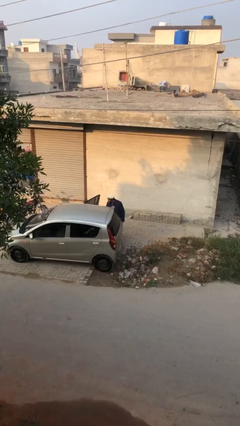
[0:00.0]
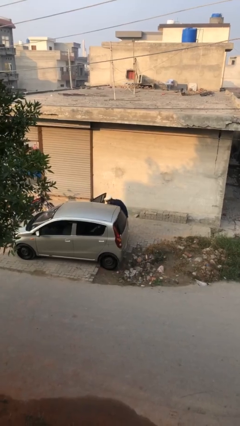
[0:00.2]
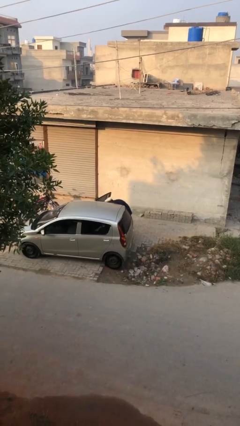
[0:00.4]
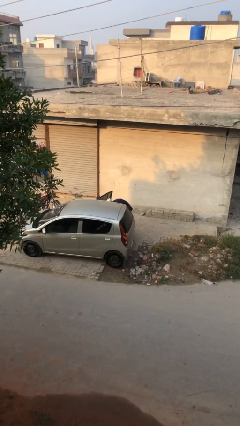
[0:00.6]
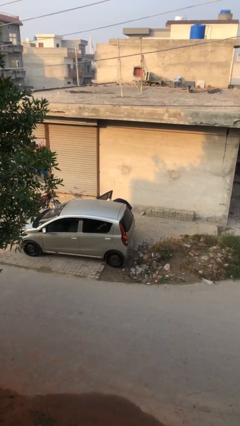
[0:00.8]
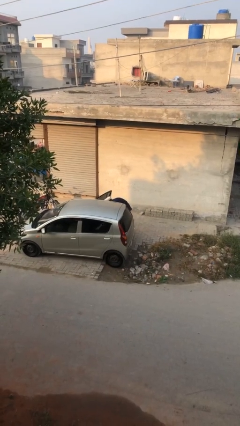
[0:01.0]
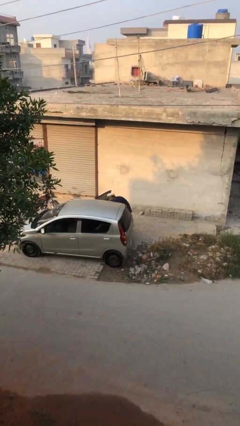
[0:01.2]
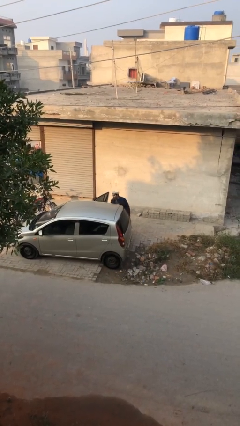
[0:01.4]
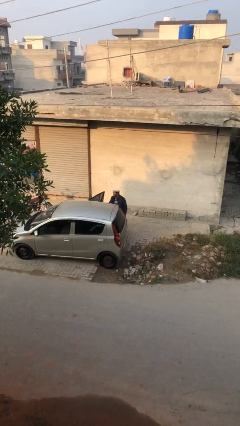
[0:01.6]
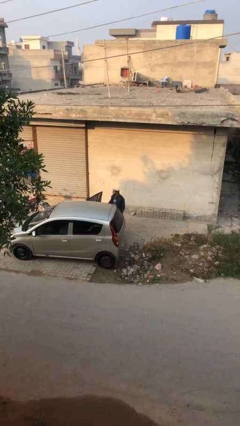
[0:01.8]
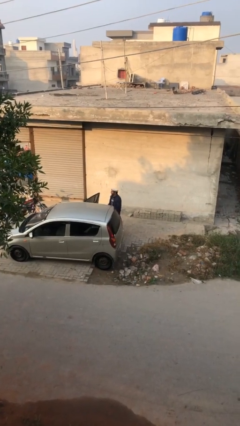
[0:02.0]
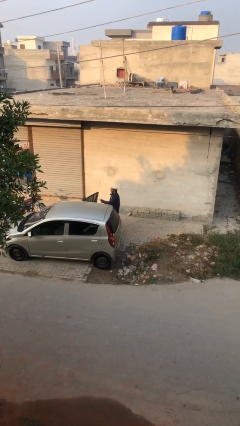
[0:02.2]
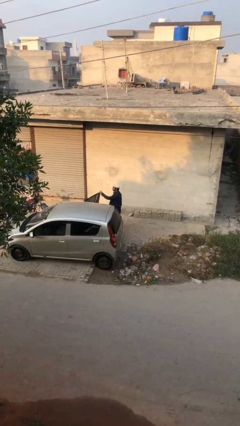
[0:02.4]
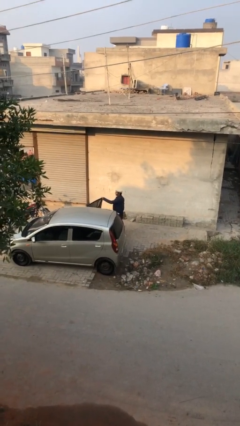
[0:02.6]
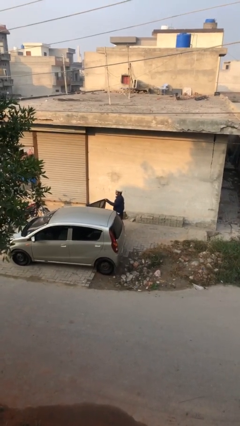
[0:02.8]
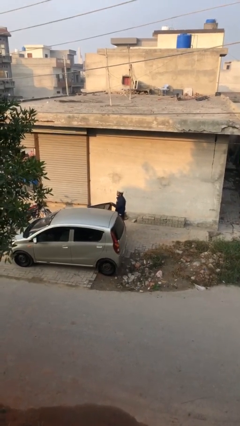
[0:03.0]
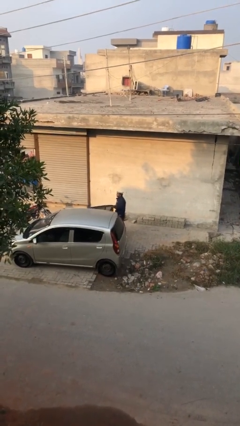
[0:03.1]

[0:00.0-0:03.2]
person unloads car

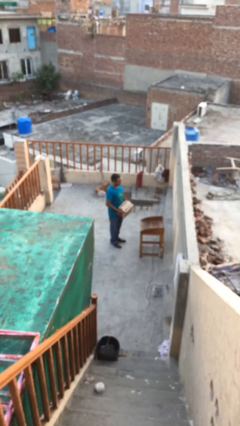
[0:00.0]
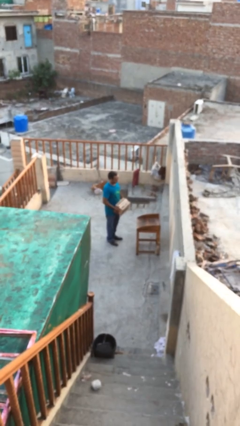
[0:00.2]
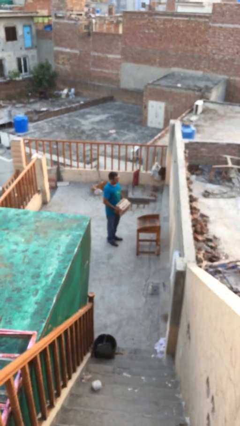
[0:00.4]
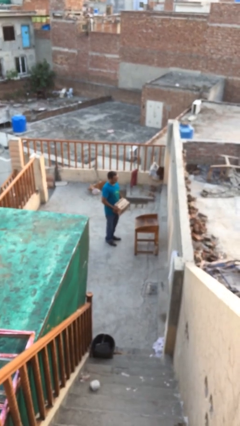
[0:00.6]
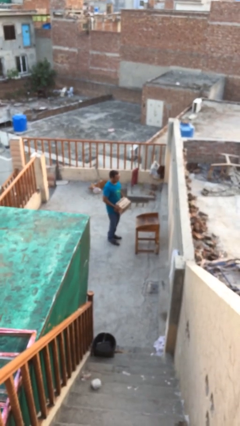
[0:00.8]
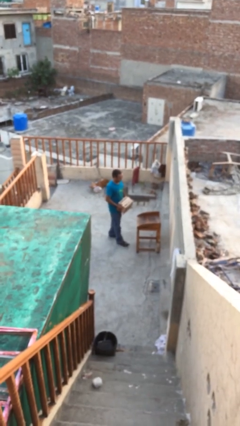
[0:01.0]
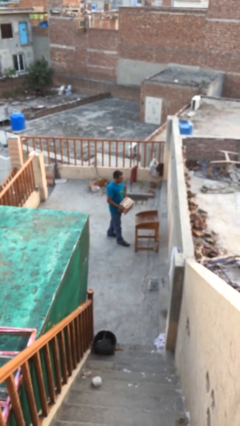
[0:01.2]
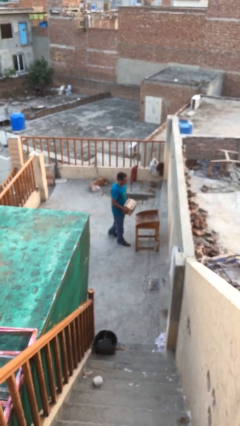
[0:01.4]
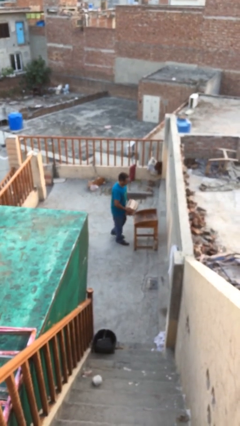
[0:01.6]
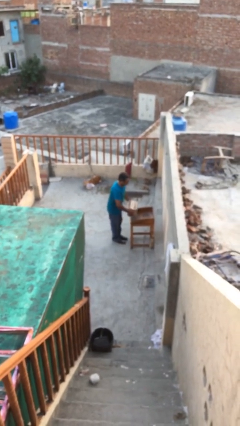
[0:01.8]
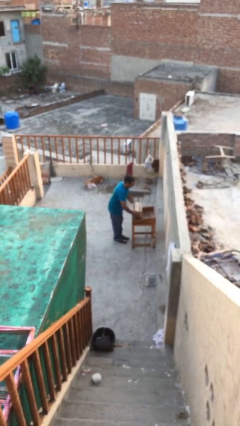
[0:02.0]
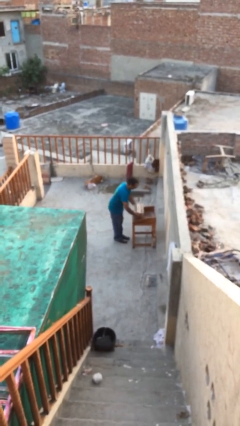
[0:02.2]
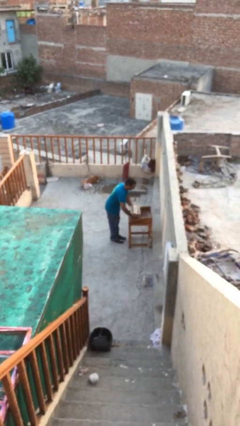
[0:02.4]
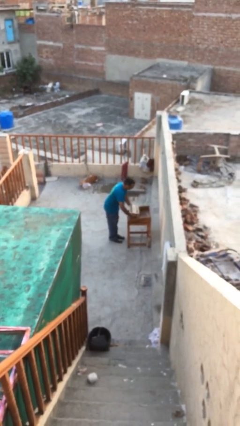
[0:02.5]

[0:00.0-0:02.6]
person puts down object on table

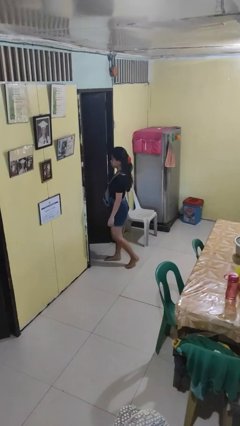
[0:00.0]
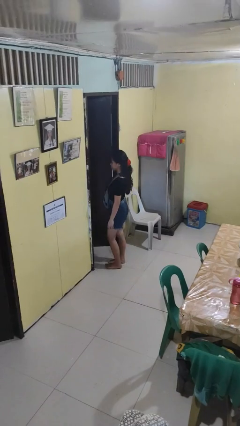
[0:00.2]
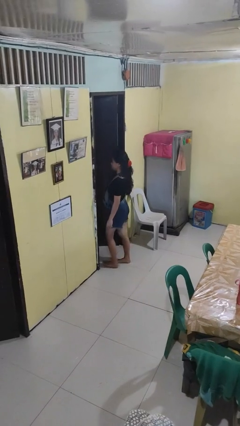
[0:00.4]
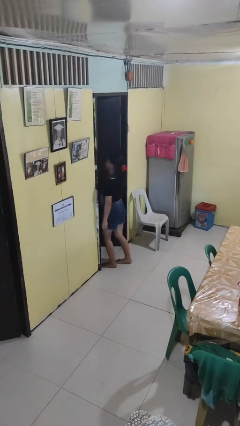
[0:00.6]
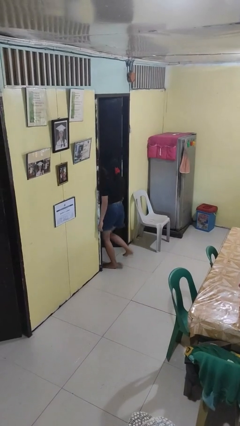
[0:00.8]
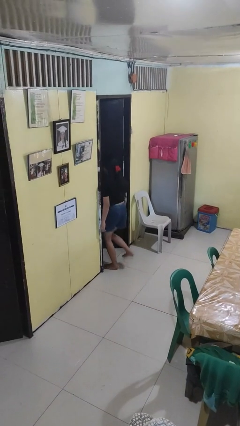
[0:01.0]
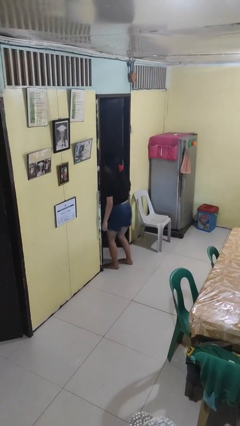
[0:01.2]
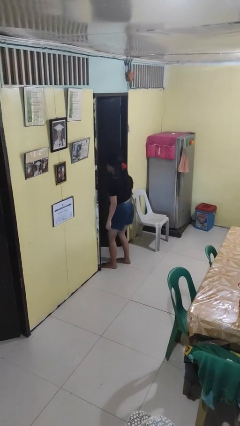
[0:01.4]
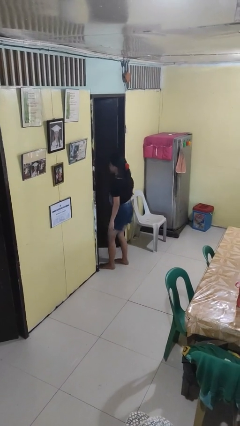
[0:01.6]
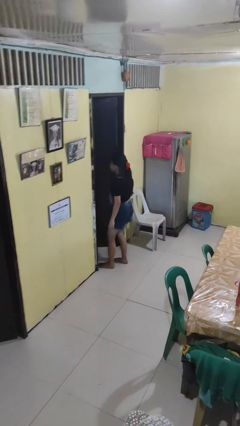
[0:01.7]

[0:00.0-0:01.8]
person bumps into wall

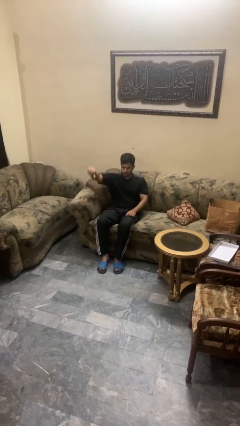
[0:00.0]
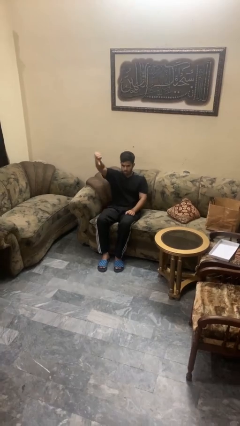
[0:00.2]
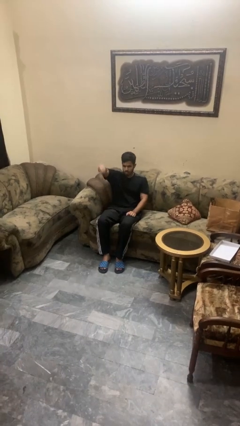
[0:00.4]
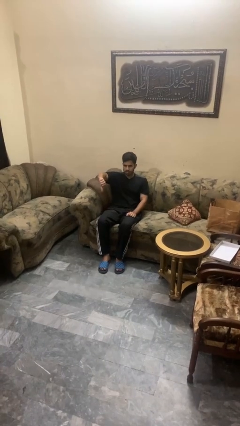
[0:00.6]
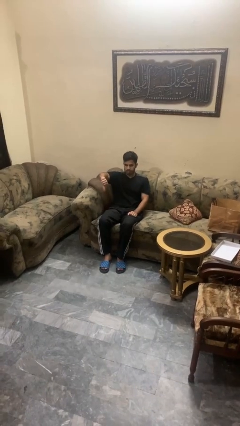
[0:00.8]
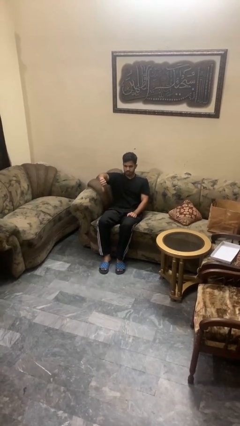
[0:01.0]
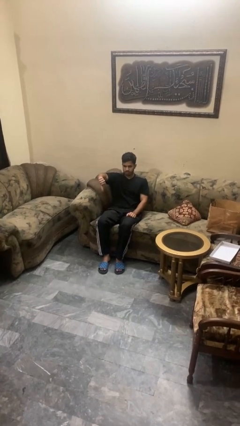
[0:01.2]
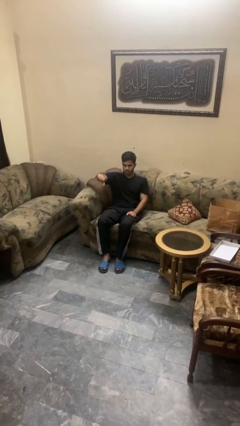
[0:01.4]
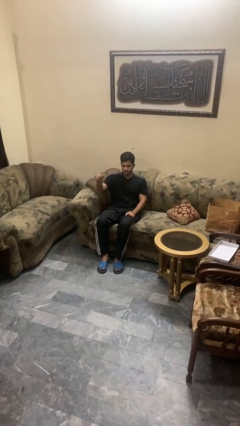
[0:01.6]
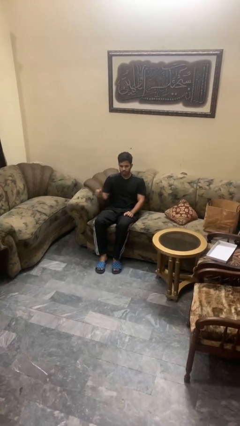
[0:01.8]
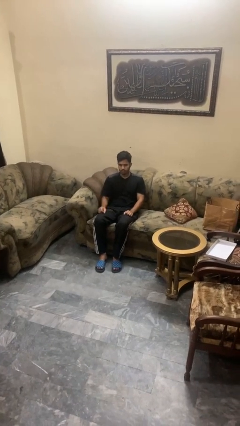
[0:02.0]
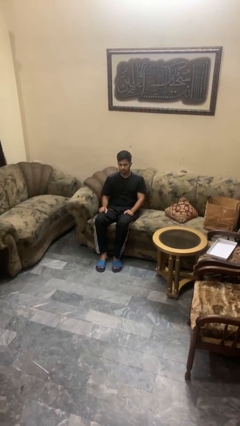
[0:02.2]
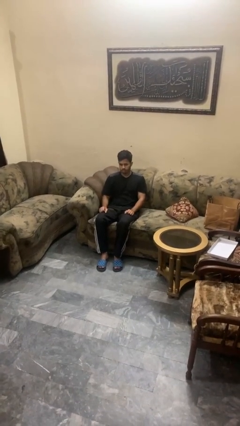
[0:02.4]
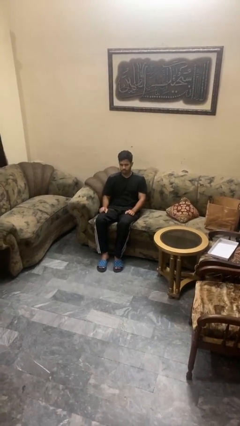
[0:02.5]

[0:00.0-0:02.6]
person gestures thumbs down

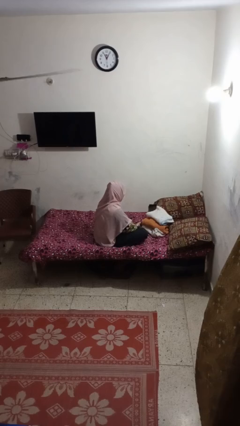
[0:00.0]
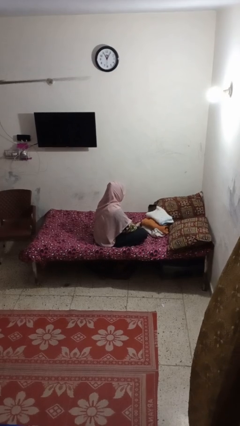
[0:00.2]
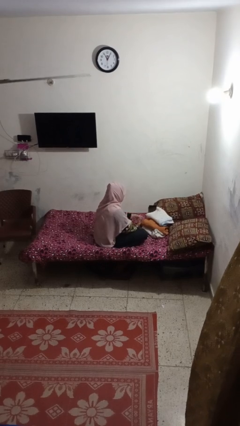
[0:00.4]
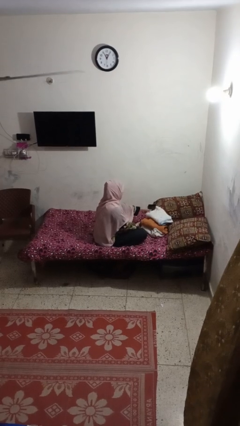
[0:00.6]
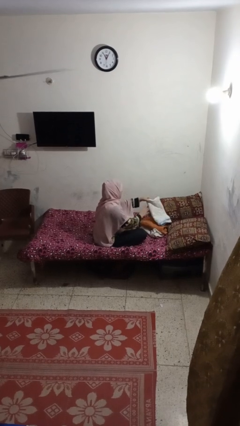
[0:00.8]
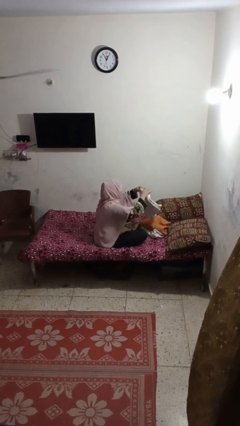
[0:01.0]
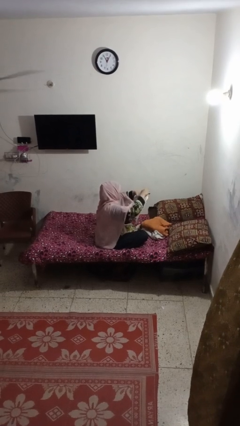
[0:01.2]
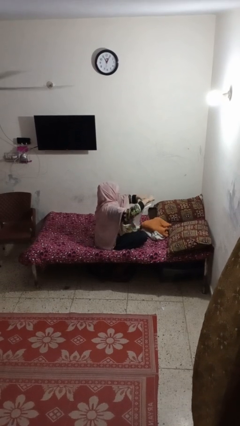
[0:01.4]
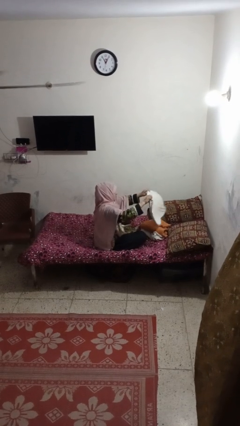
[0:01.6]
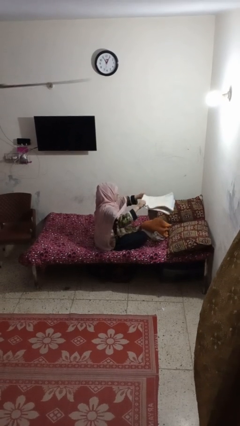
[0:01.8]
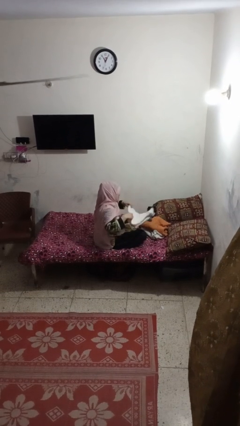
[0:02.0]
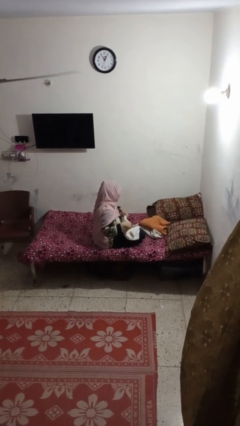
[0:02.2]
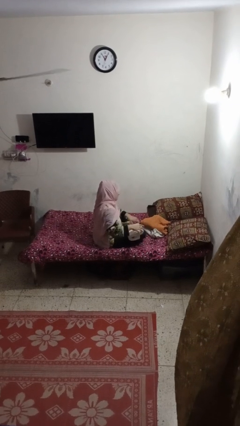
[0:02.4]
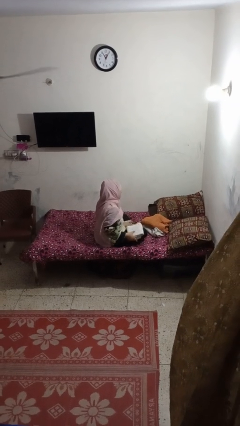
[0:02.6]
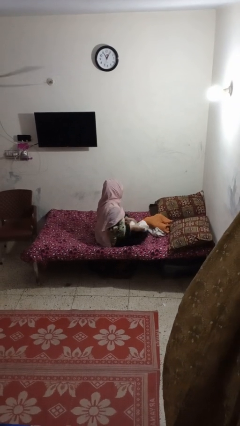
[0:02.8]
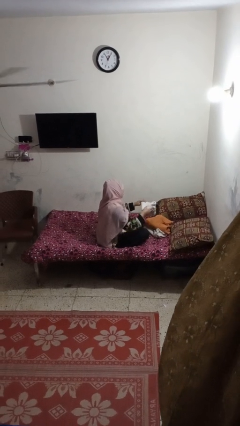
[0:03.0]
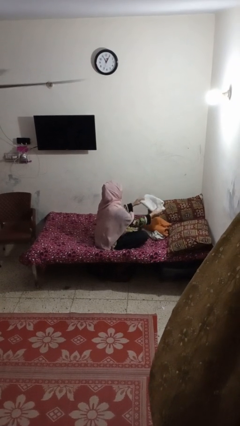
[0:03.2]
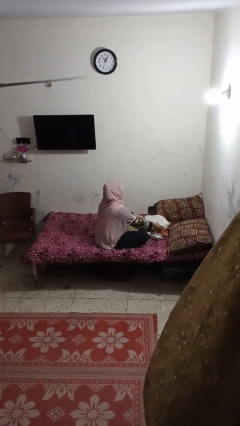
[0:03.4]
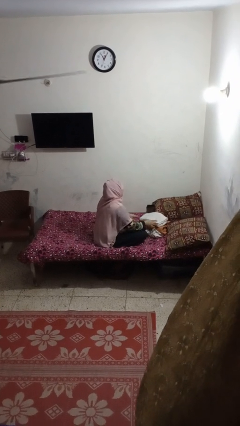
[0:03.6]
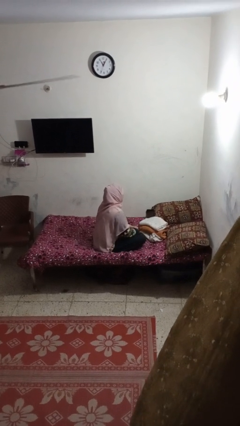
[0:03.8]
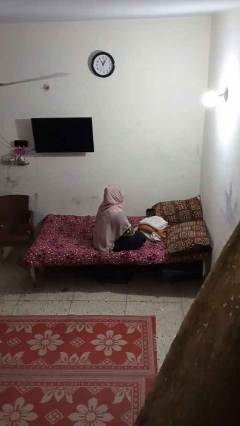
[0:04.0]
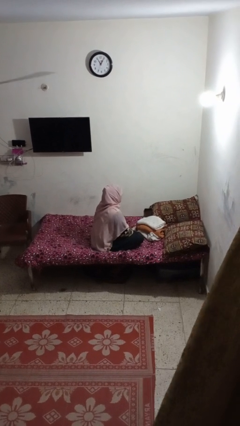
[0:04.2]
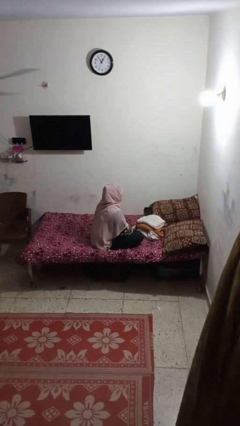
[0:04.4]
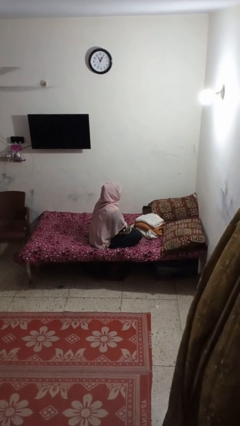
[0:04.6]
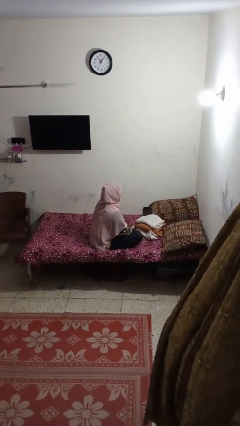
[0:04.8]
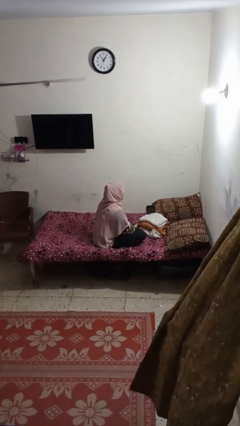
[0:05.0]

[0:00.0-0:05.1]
person folds towel

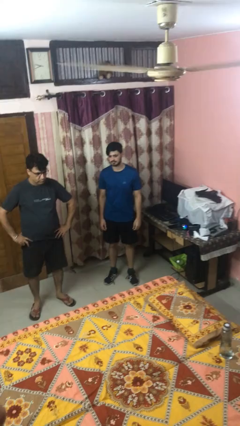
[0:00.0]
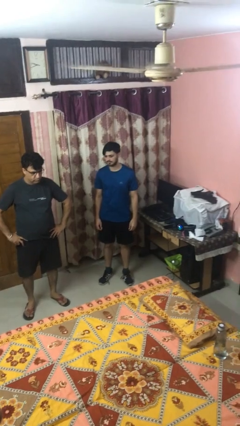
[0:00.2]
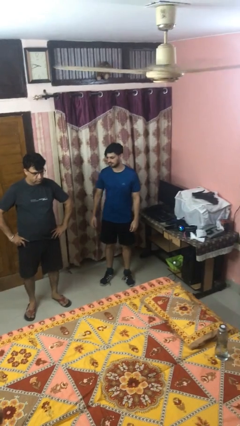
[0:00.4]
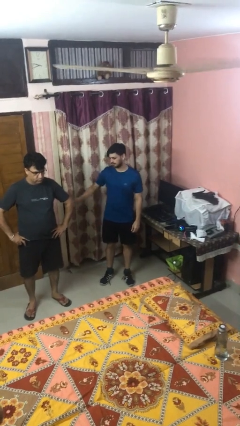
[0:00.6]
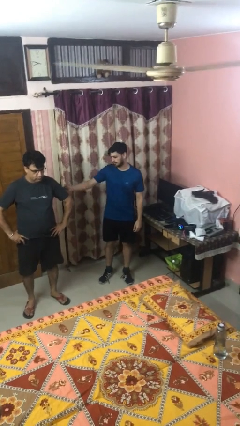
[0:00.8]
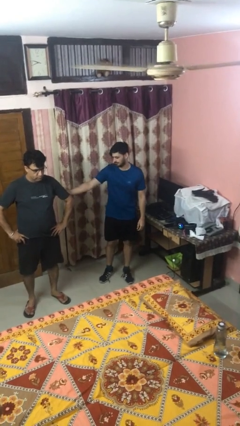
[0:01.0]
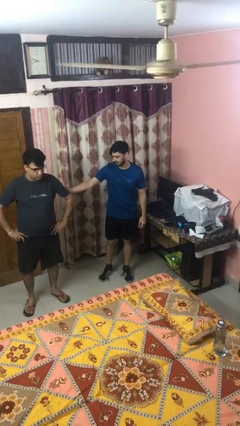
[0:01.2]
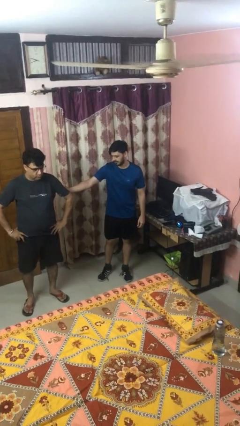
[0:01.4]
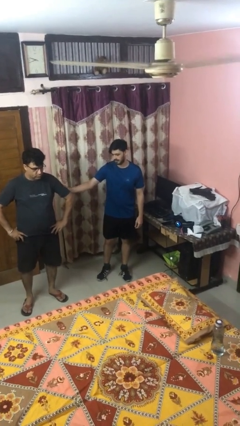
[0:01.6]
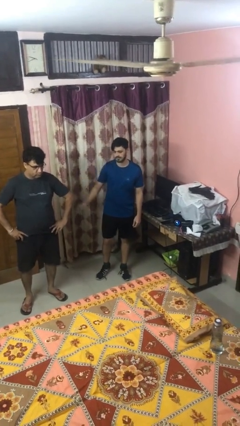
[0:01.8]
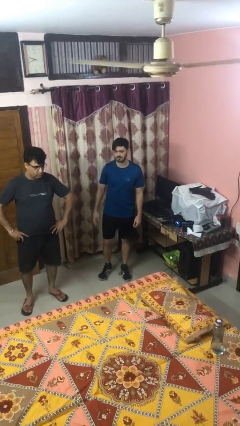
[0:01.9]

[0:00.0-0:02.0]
person grabs person by bicep

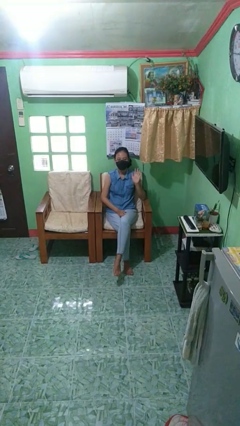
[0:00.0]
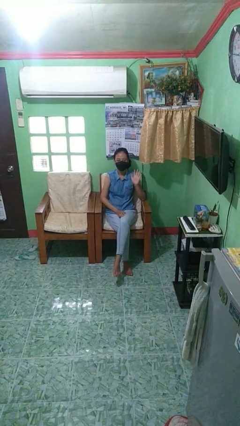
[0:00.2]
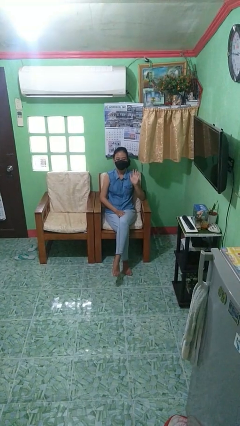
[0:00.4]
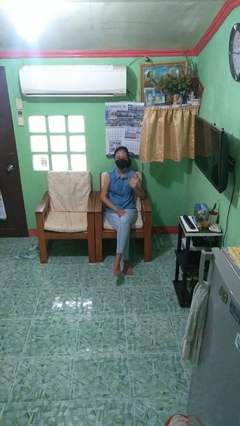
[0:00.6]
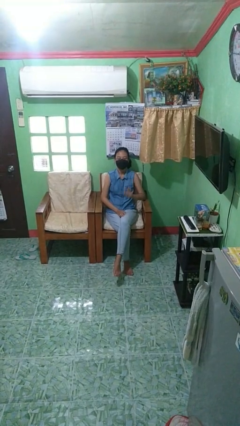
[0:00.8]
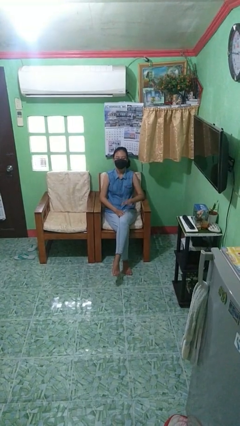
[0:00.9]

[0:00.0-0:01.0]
person gestures number five
